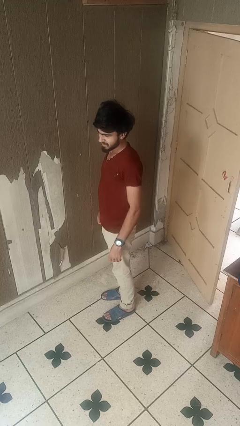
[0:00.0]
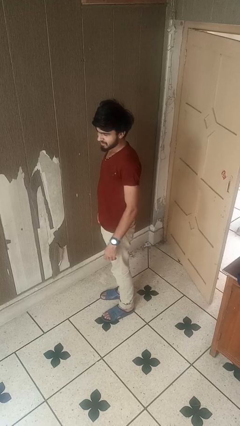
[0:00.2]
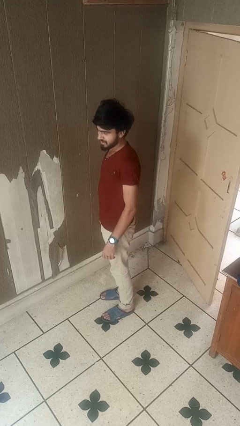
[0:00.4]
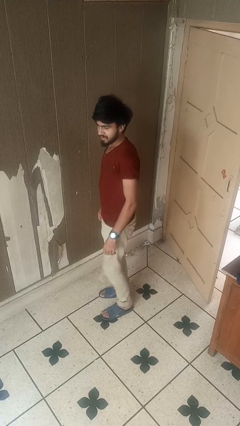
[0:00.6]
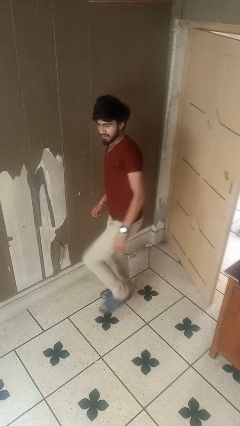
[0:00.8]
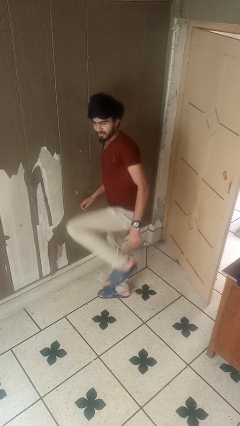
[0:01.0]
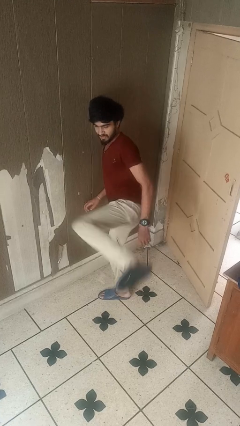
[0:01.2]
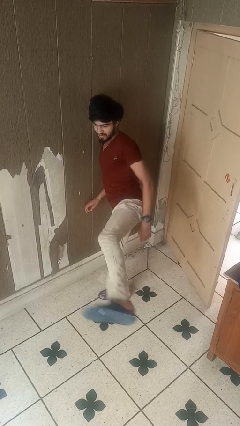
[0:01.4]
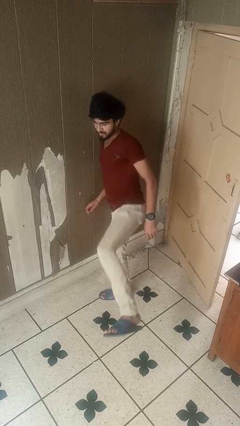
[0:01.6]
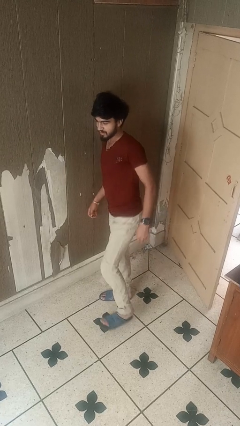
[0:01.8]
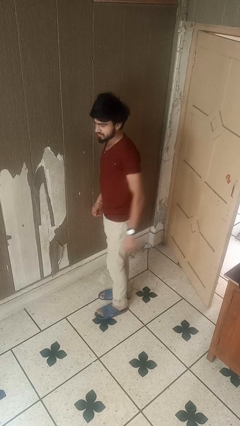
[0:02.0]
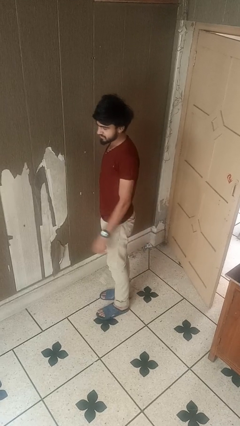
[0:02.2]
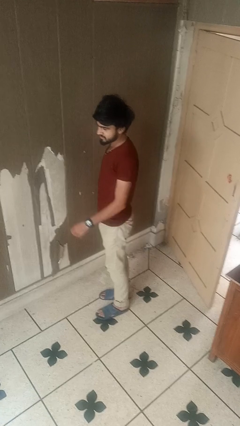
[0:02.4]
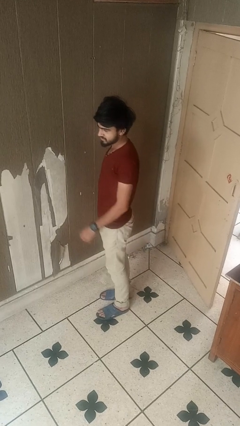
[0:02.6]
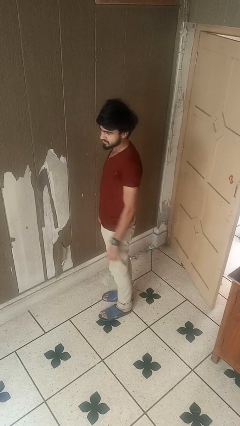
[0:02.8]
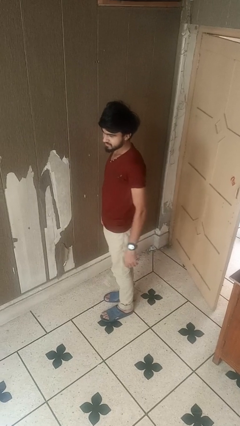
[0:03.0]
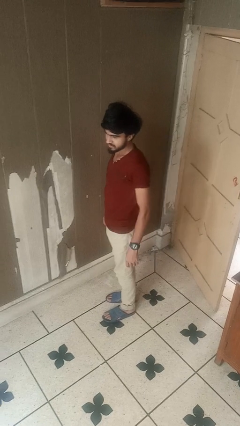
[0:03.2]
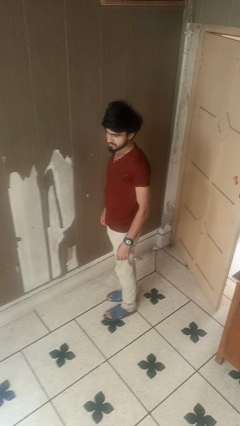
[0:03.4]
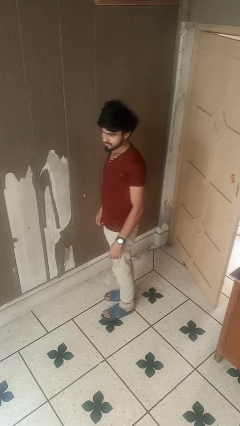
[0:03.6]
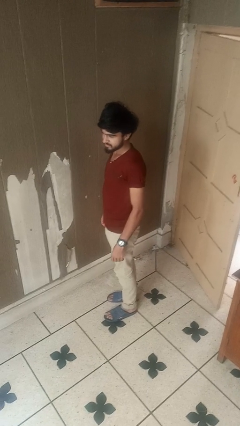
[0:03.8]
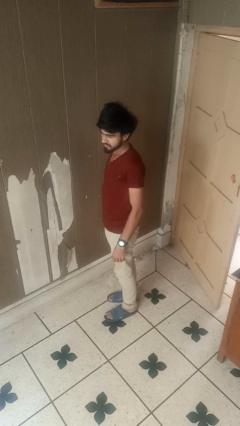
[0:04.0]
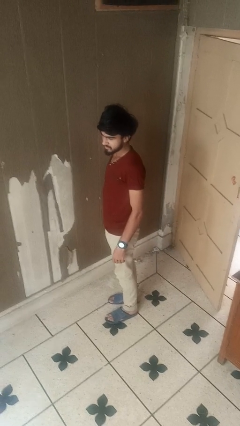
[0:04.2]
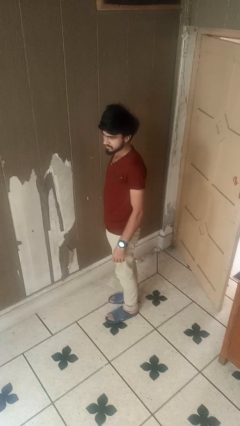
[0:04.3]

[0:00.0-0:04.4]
person karate kicks

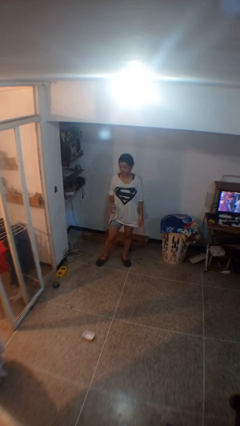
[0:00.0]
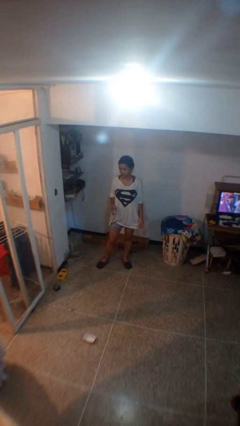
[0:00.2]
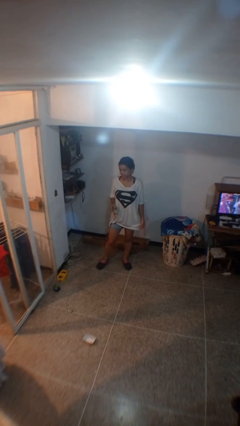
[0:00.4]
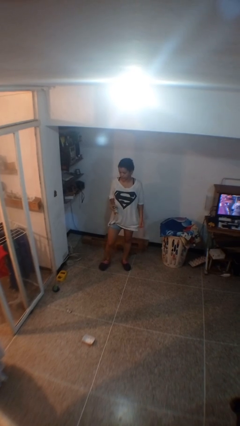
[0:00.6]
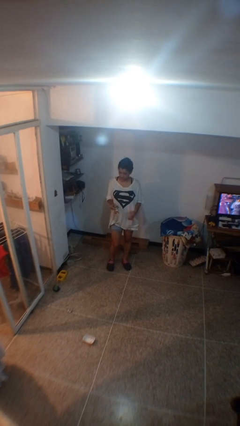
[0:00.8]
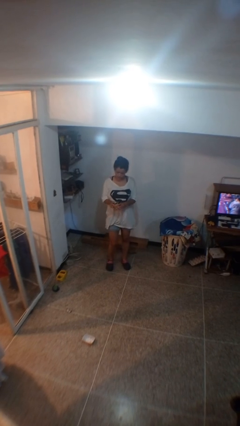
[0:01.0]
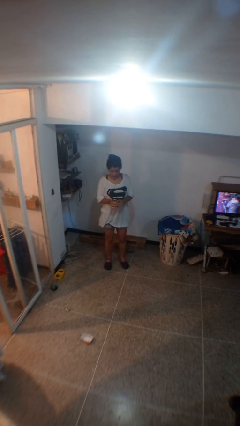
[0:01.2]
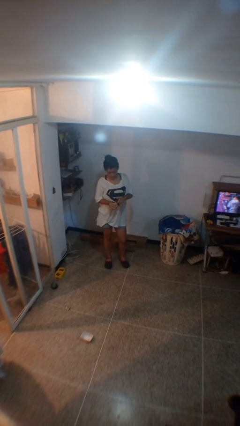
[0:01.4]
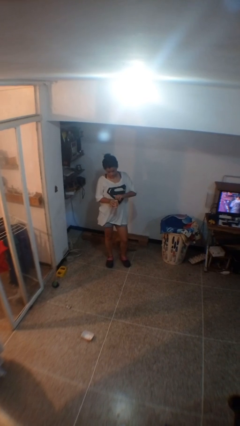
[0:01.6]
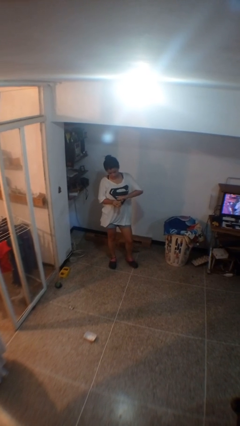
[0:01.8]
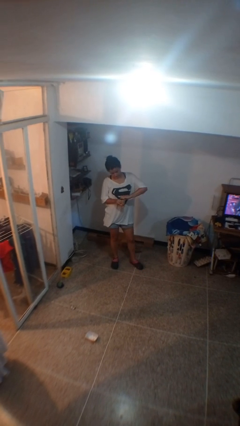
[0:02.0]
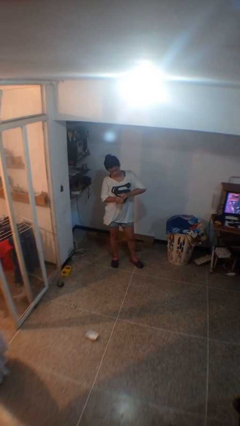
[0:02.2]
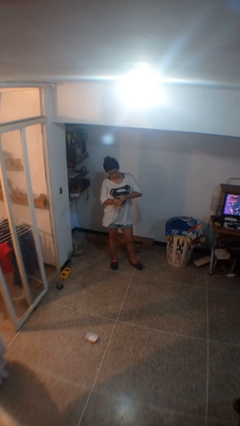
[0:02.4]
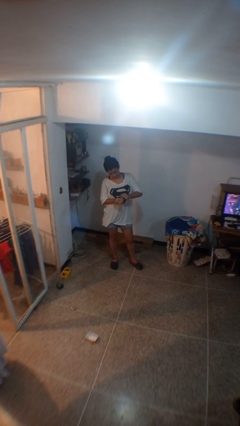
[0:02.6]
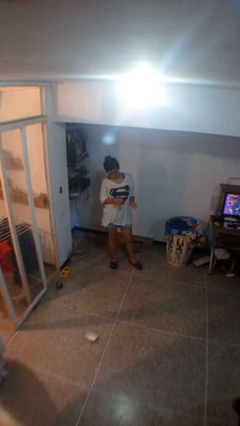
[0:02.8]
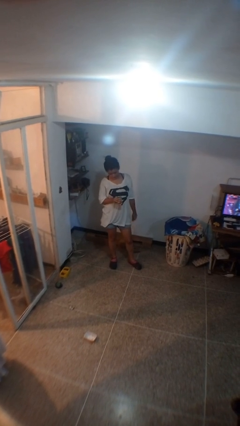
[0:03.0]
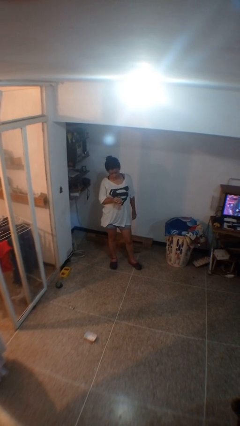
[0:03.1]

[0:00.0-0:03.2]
person opens beverage can

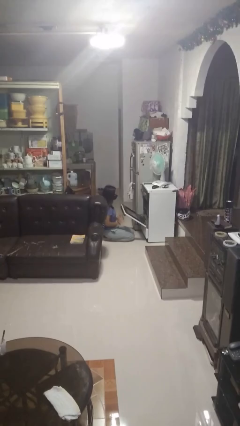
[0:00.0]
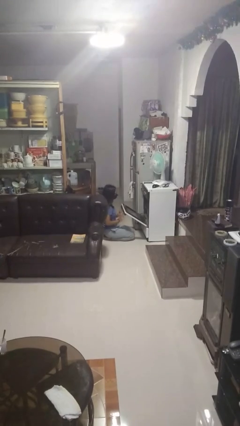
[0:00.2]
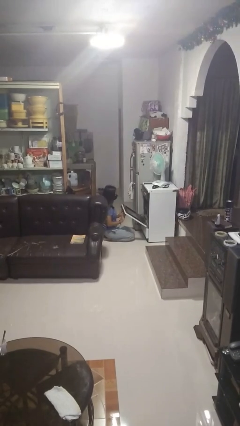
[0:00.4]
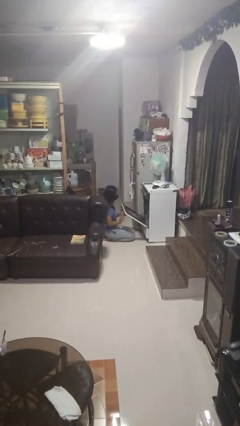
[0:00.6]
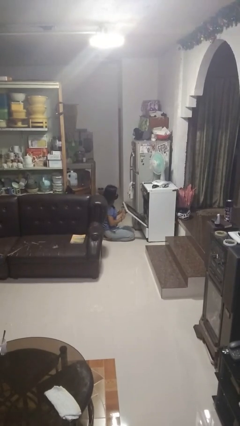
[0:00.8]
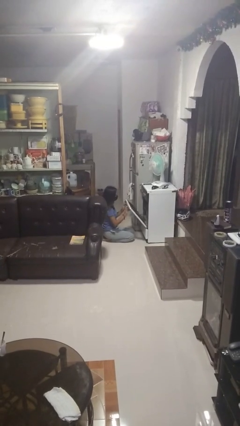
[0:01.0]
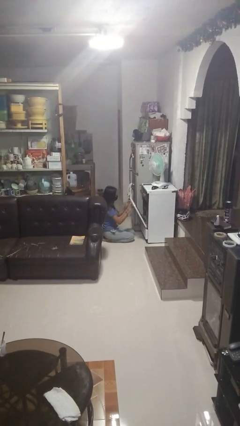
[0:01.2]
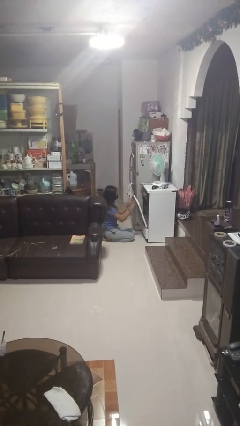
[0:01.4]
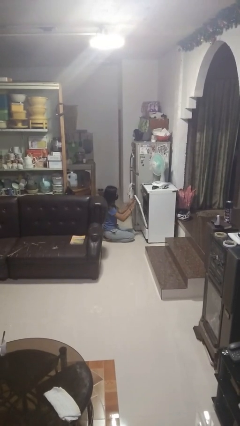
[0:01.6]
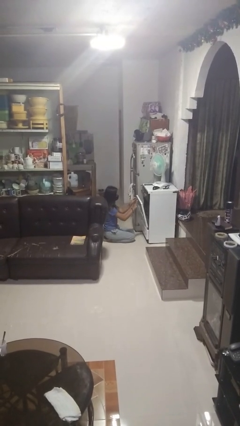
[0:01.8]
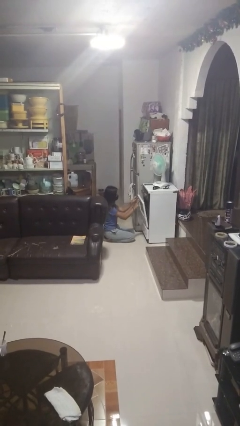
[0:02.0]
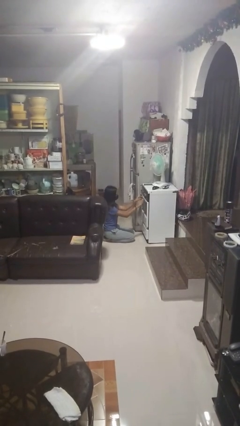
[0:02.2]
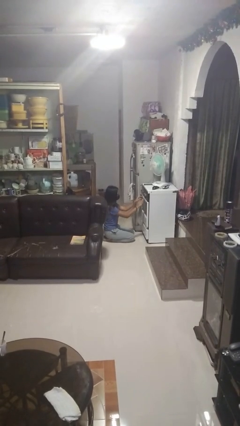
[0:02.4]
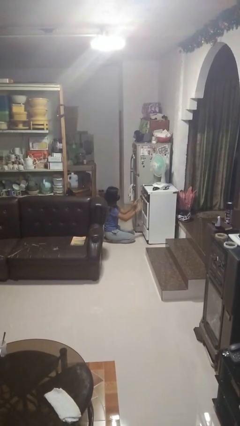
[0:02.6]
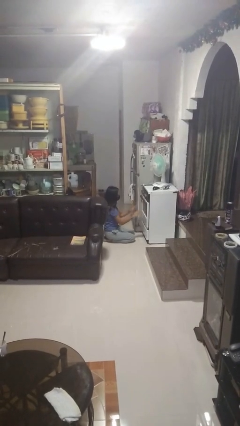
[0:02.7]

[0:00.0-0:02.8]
person closes oven door

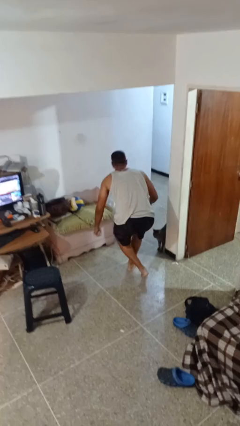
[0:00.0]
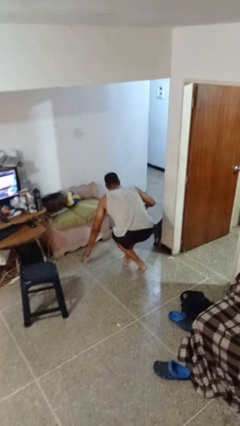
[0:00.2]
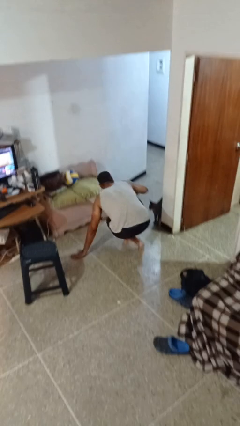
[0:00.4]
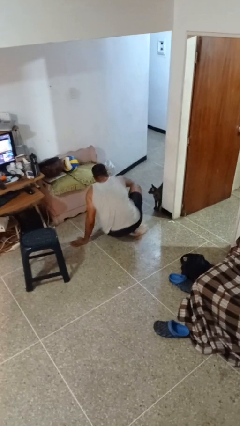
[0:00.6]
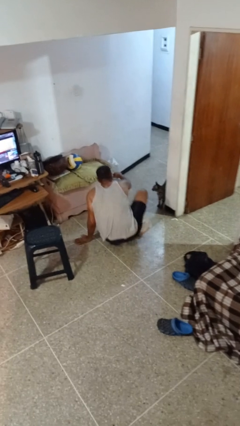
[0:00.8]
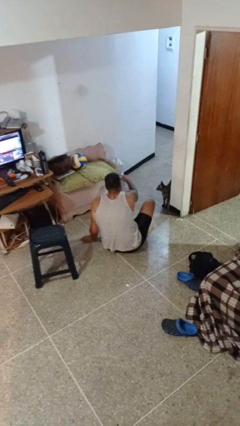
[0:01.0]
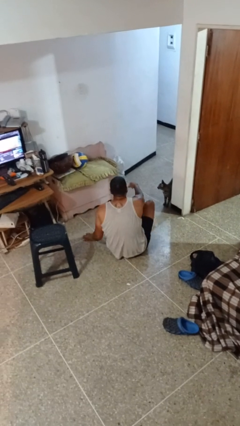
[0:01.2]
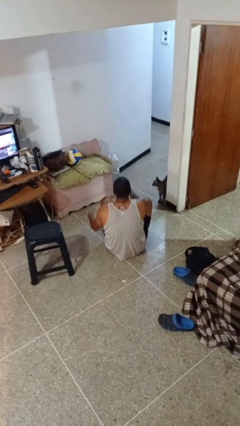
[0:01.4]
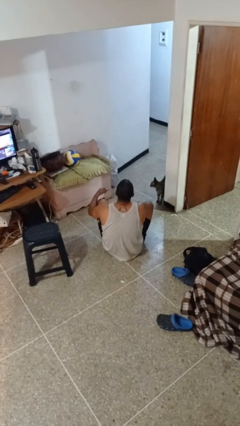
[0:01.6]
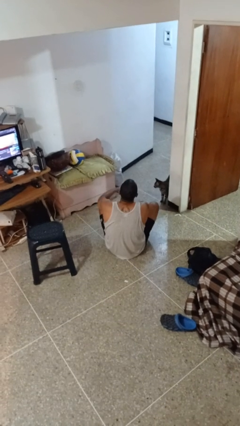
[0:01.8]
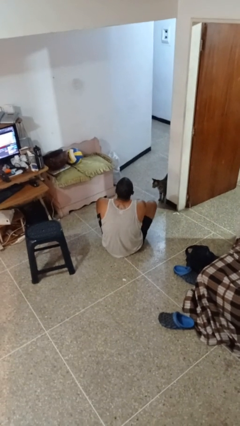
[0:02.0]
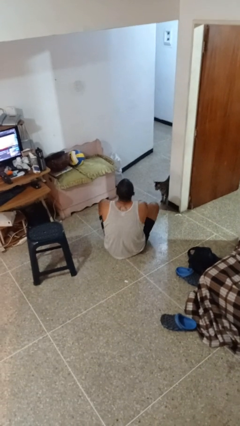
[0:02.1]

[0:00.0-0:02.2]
person sits crisscross

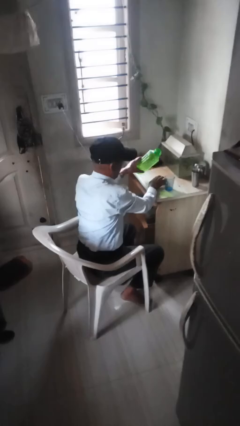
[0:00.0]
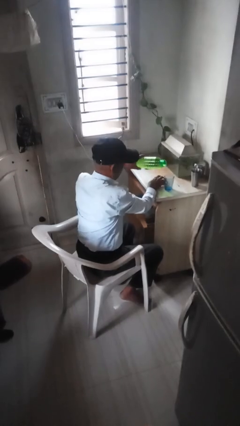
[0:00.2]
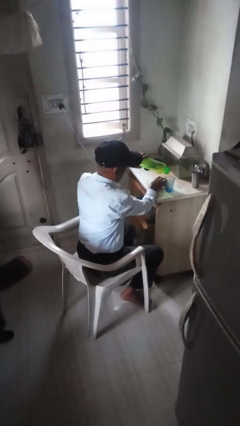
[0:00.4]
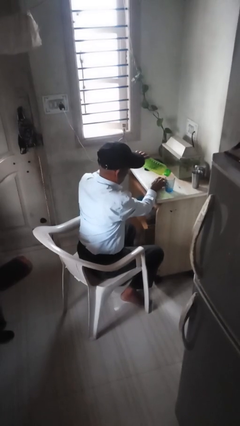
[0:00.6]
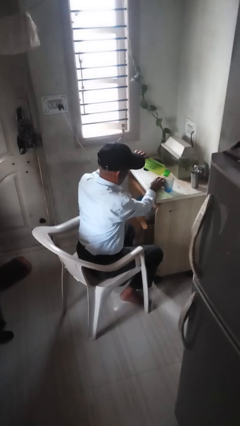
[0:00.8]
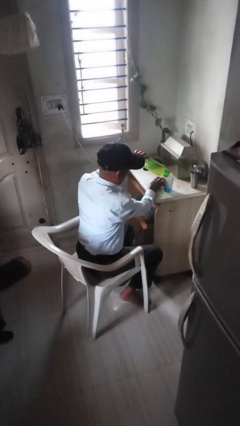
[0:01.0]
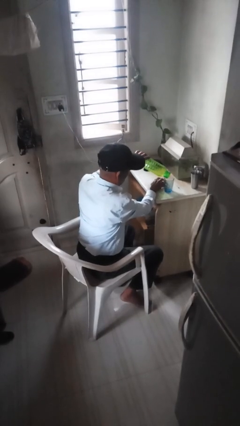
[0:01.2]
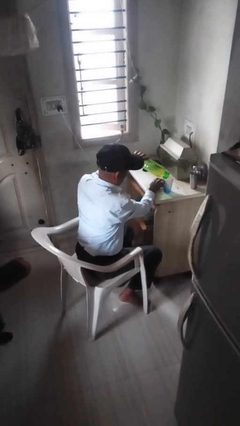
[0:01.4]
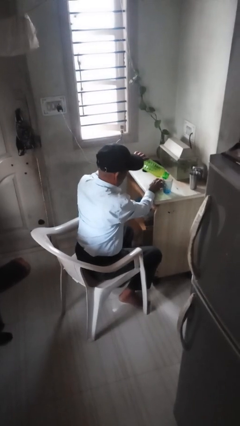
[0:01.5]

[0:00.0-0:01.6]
person pours liquid into cup

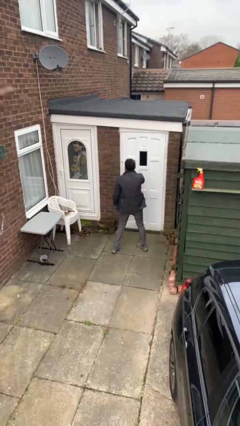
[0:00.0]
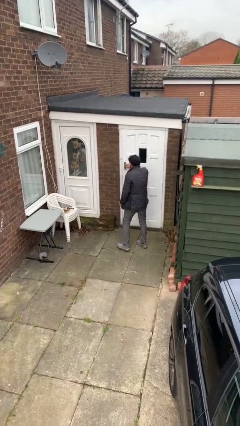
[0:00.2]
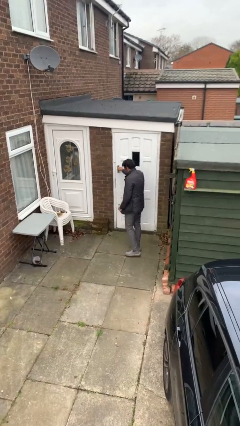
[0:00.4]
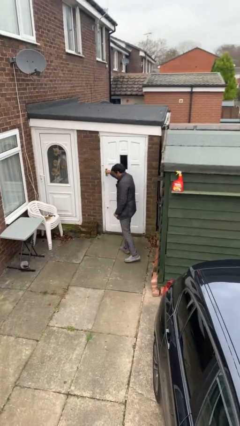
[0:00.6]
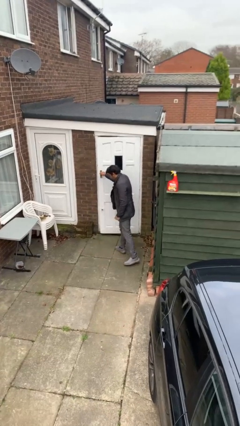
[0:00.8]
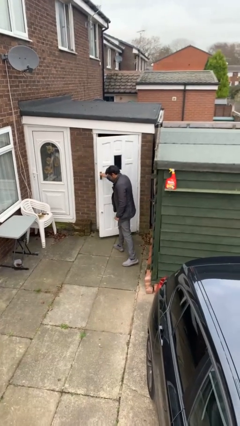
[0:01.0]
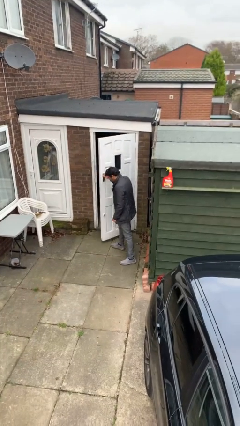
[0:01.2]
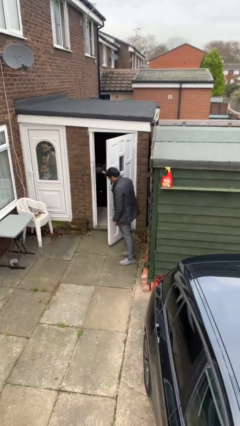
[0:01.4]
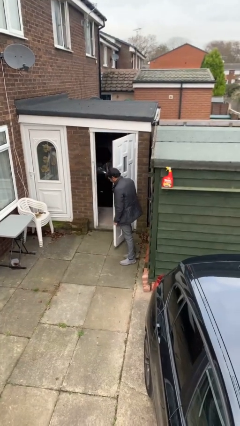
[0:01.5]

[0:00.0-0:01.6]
person opens facility door

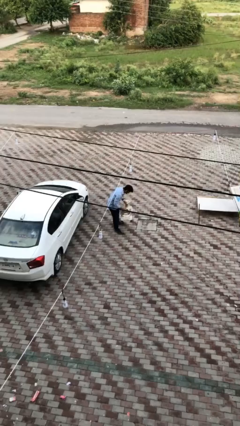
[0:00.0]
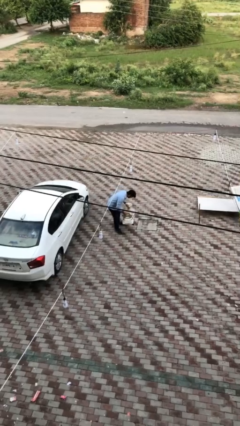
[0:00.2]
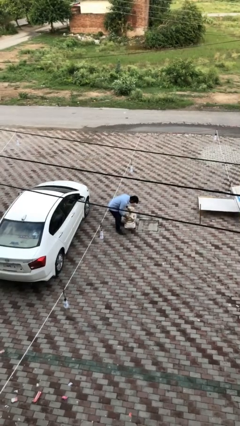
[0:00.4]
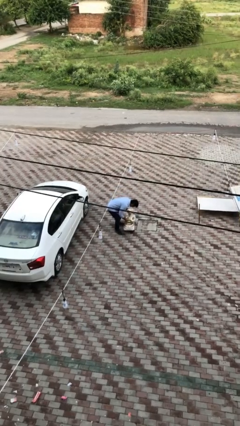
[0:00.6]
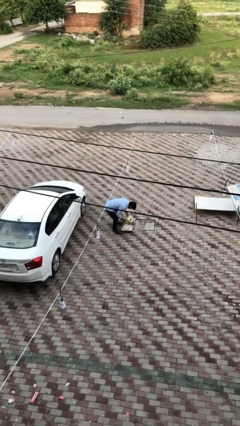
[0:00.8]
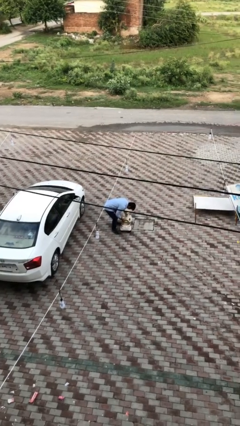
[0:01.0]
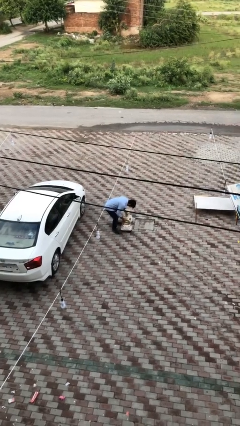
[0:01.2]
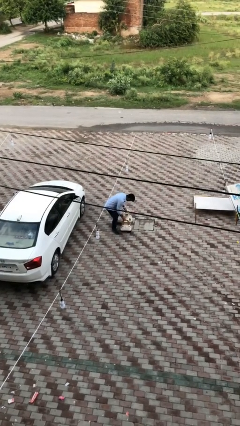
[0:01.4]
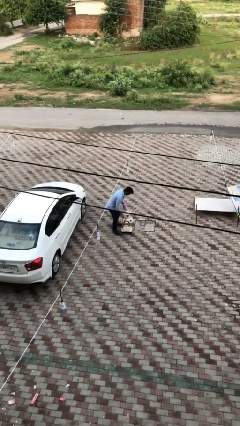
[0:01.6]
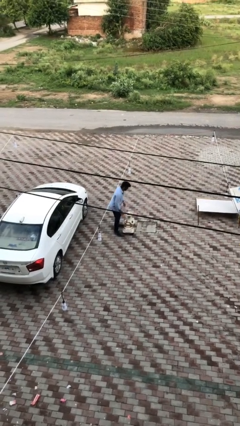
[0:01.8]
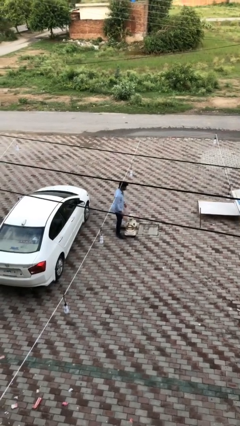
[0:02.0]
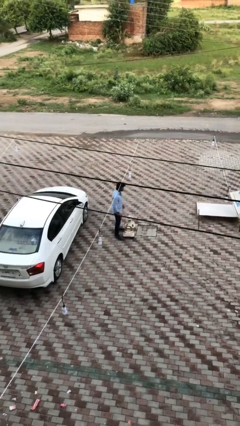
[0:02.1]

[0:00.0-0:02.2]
person puts down object on floor
